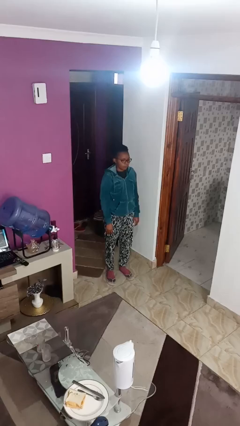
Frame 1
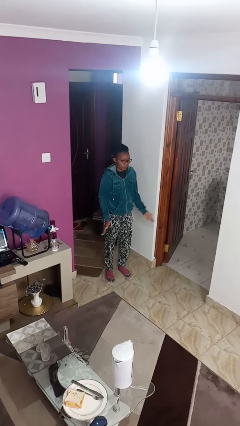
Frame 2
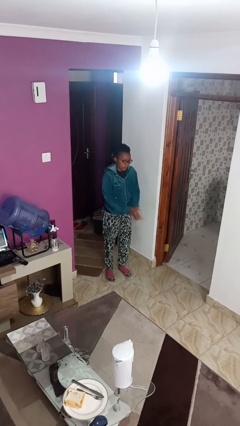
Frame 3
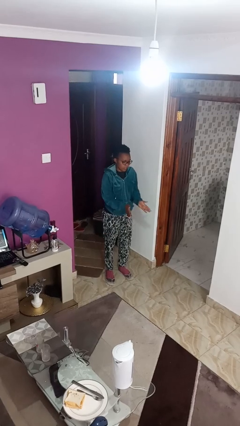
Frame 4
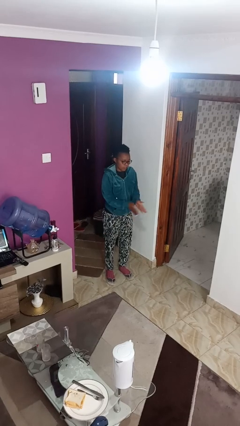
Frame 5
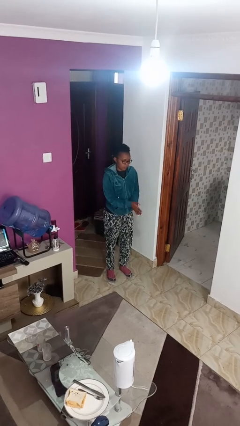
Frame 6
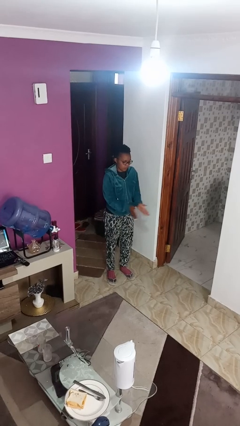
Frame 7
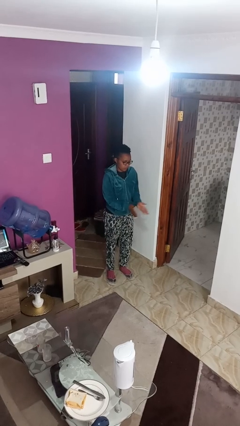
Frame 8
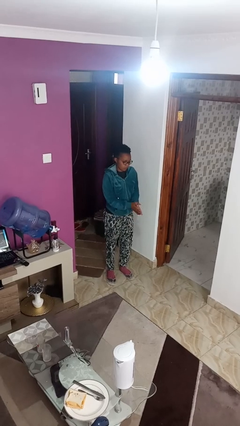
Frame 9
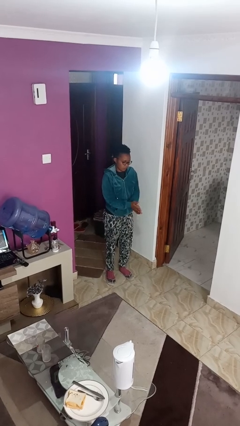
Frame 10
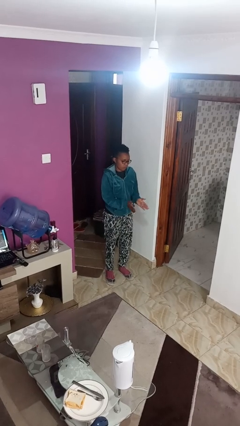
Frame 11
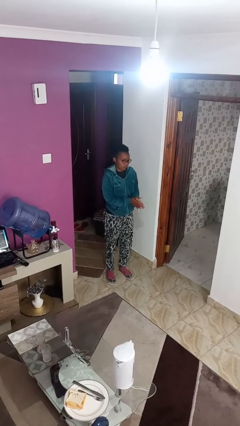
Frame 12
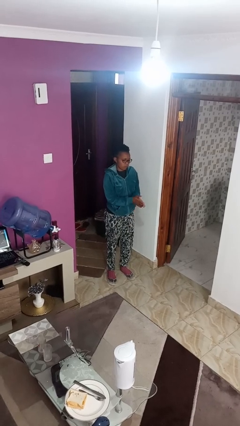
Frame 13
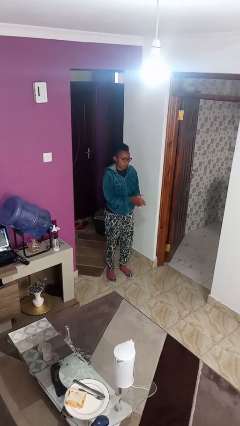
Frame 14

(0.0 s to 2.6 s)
person claps hands

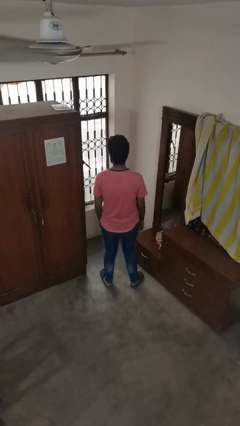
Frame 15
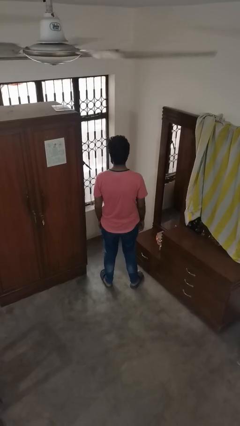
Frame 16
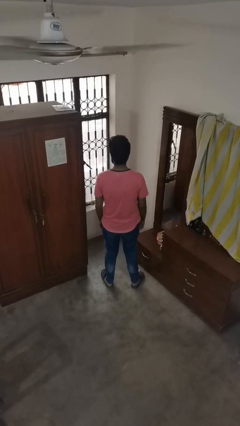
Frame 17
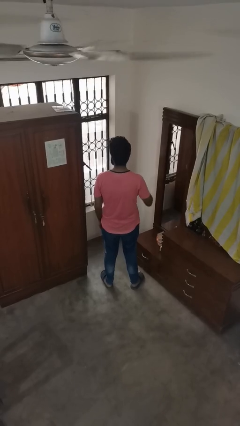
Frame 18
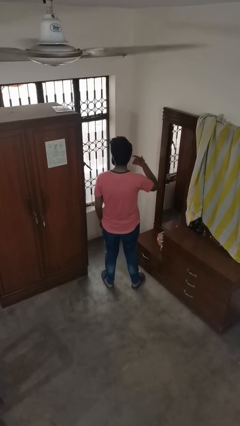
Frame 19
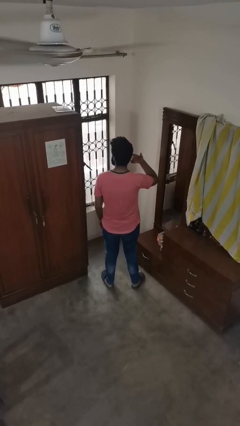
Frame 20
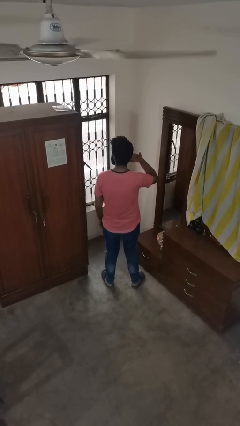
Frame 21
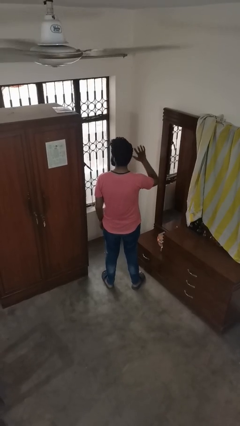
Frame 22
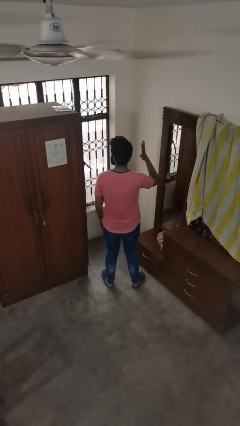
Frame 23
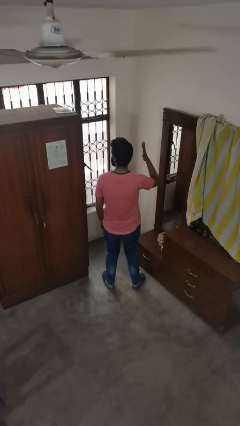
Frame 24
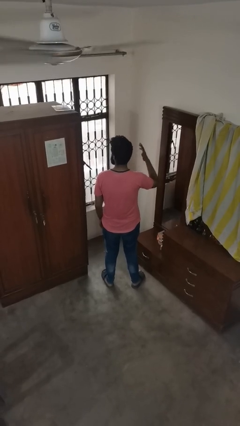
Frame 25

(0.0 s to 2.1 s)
person puts fingers in ear

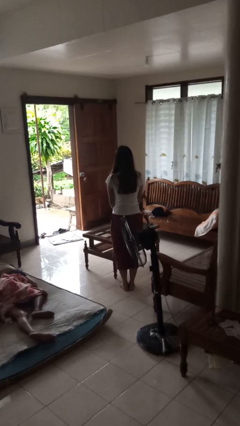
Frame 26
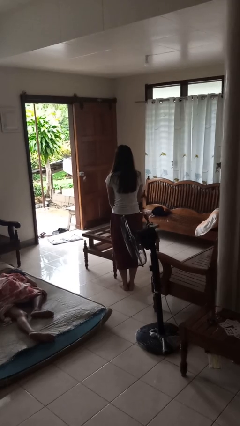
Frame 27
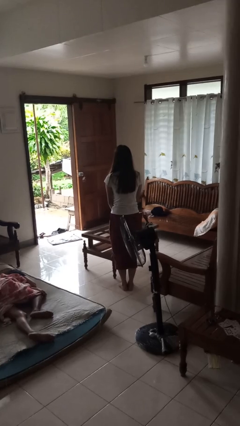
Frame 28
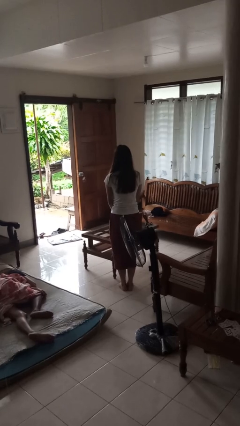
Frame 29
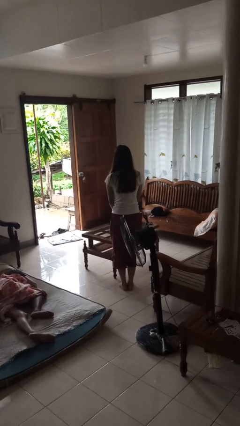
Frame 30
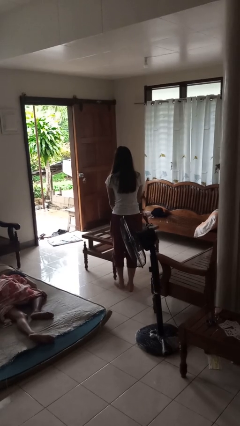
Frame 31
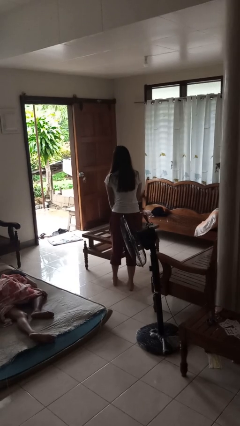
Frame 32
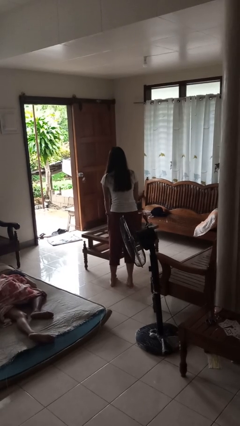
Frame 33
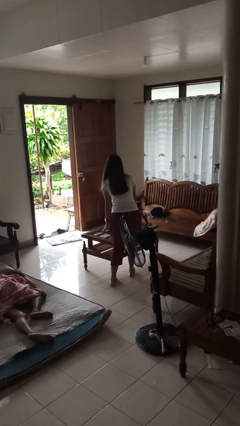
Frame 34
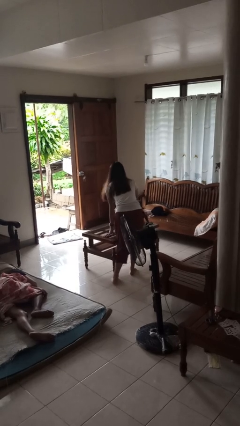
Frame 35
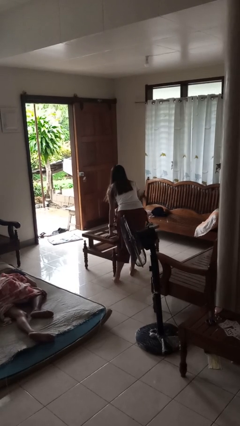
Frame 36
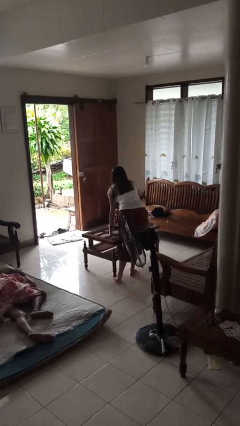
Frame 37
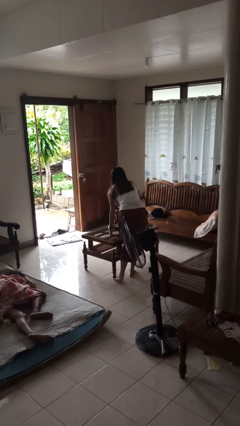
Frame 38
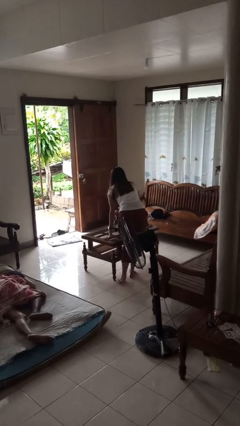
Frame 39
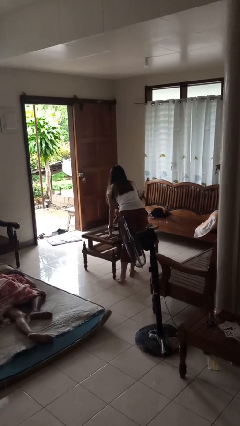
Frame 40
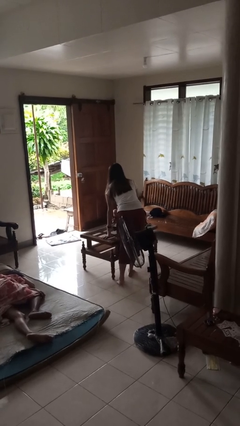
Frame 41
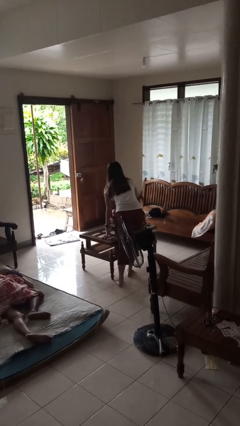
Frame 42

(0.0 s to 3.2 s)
person bumps into table

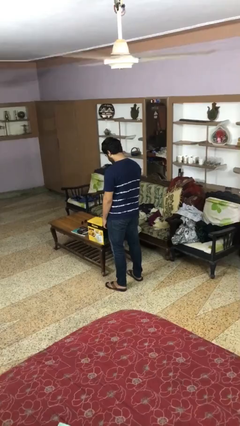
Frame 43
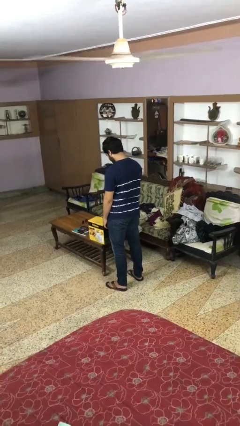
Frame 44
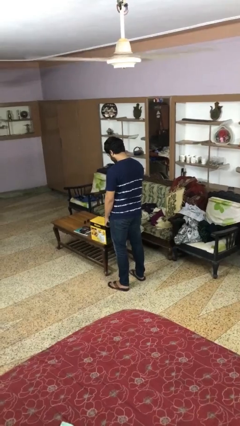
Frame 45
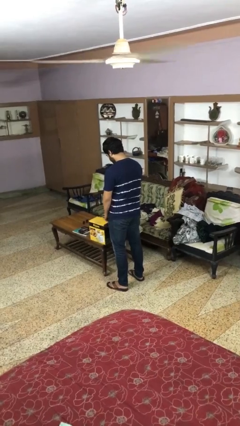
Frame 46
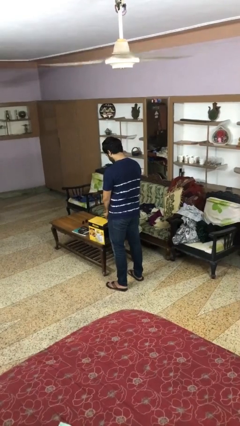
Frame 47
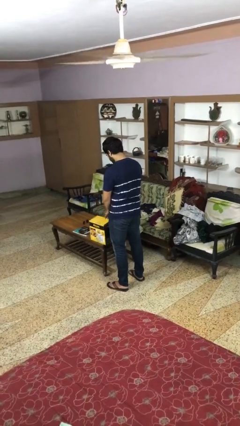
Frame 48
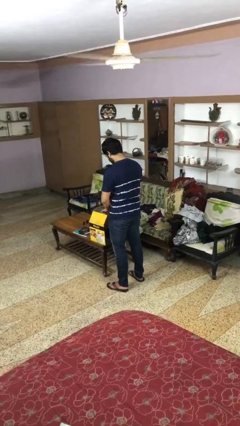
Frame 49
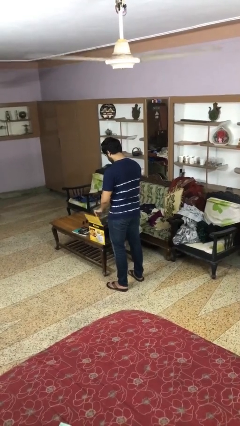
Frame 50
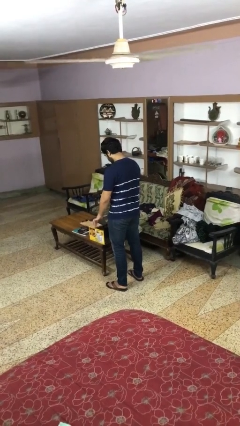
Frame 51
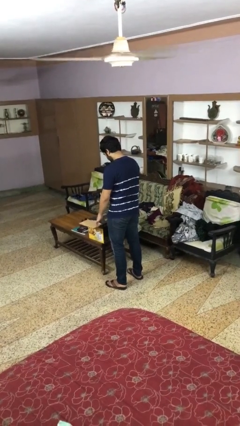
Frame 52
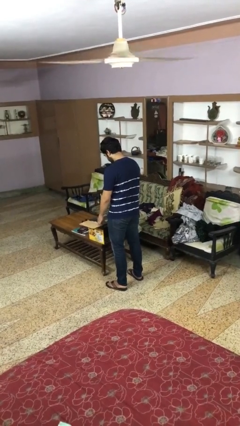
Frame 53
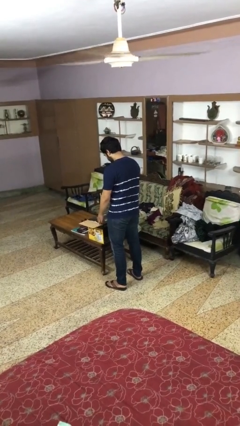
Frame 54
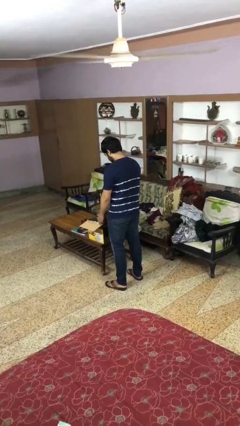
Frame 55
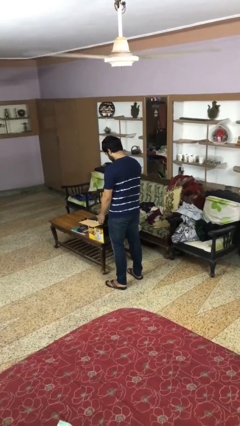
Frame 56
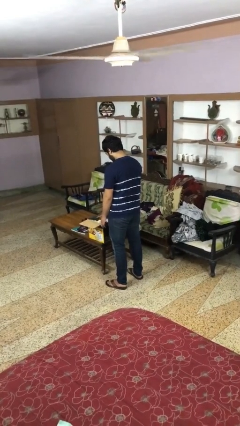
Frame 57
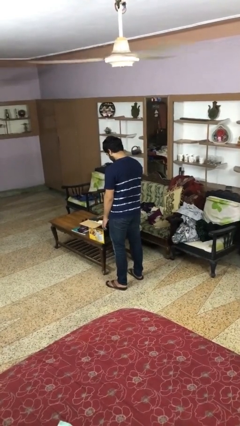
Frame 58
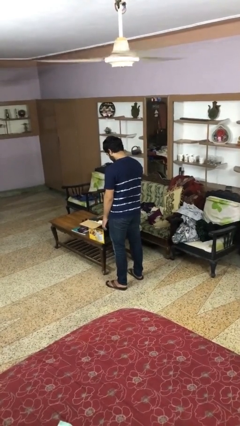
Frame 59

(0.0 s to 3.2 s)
person opens box

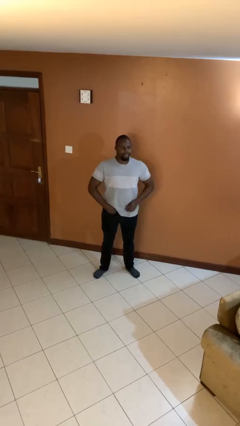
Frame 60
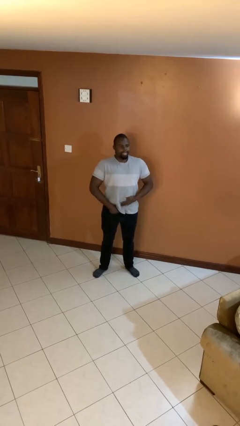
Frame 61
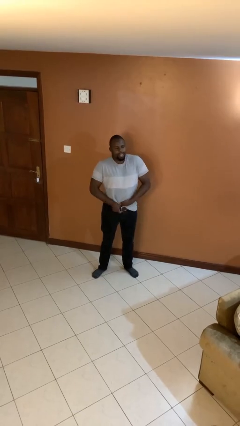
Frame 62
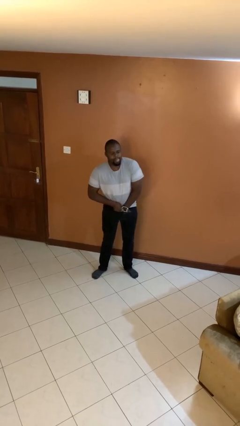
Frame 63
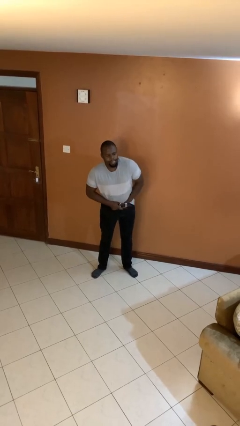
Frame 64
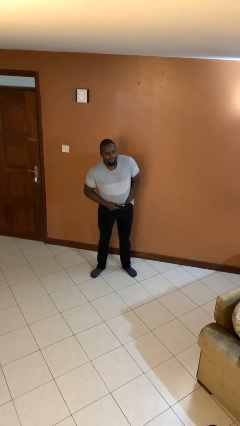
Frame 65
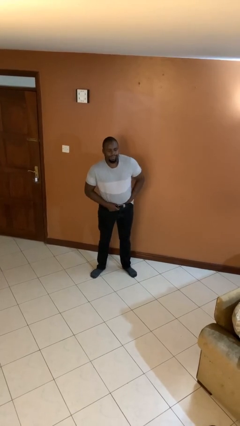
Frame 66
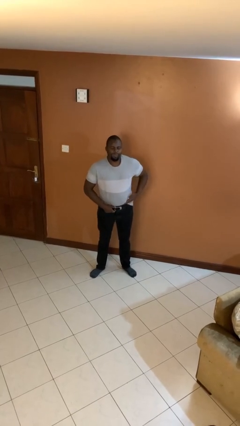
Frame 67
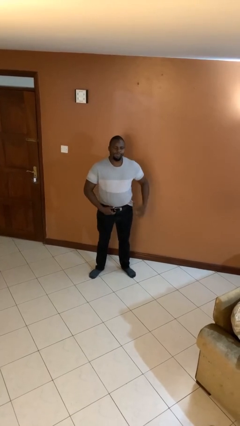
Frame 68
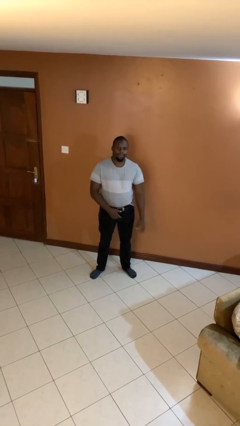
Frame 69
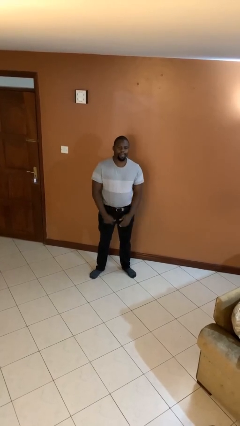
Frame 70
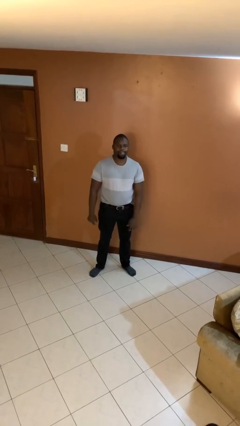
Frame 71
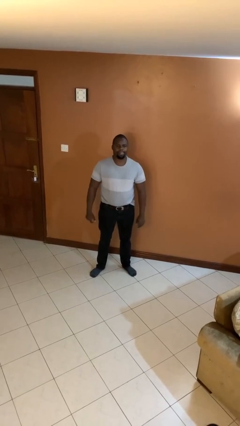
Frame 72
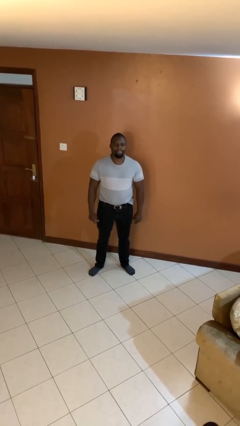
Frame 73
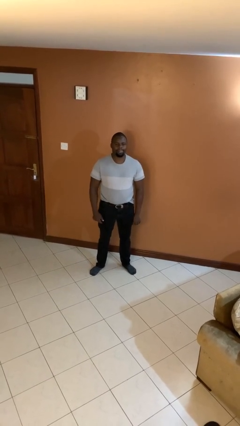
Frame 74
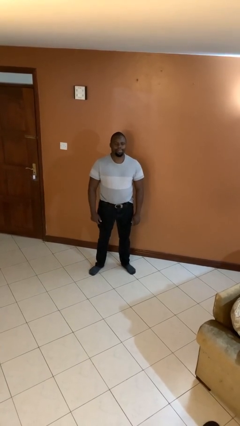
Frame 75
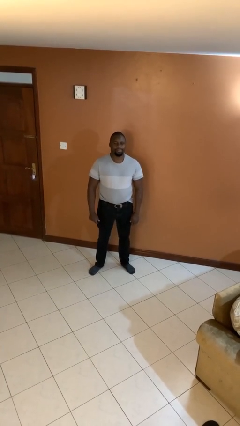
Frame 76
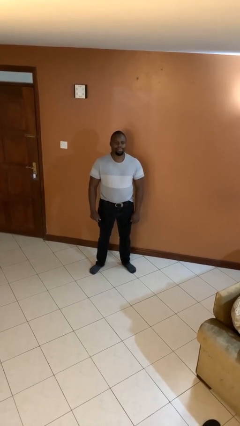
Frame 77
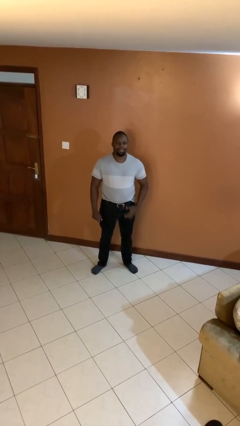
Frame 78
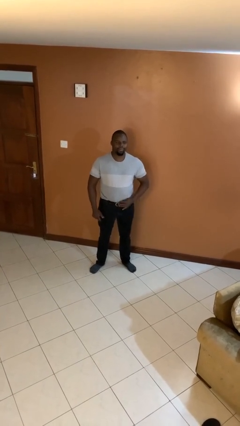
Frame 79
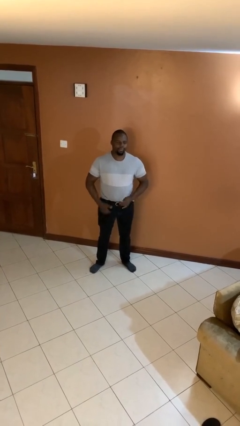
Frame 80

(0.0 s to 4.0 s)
person tucks in shirt

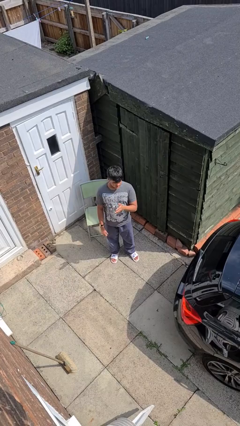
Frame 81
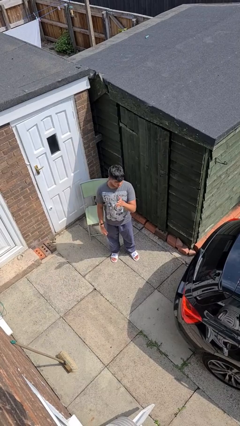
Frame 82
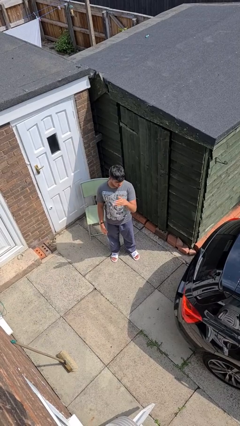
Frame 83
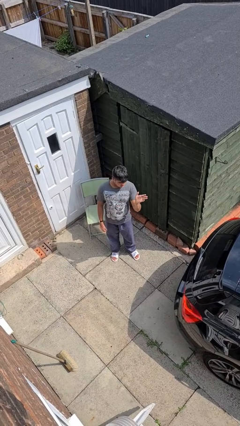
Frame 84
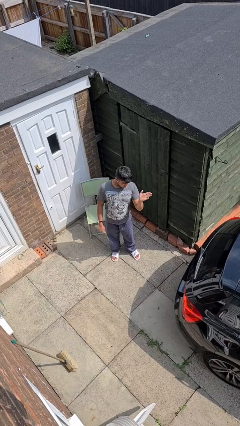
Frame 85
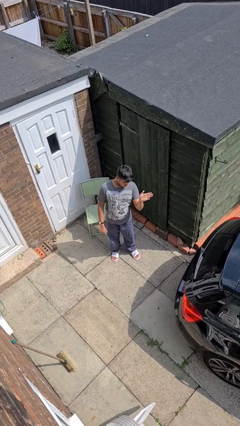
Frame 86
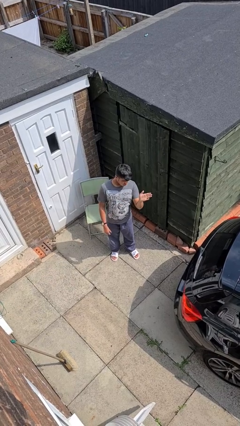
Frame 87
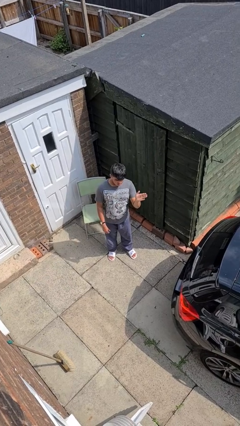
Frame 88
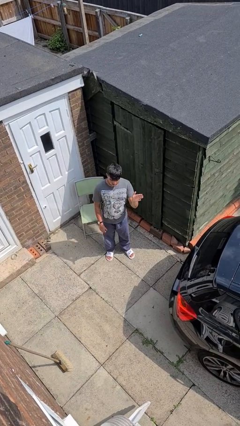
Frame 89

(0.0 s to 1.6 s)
person gestures swipe left

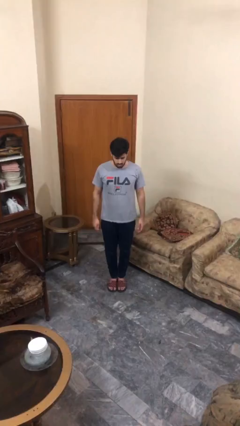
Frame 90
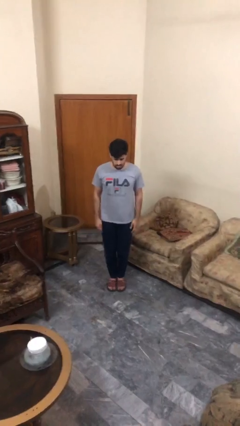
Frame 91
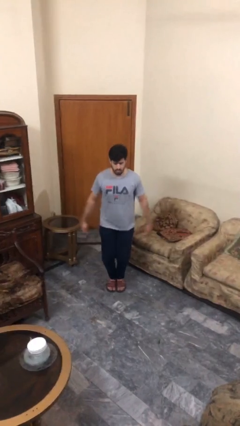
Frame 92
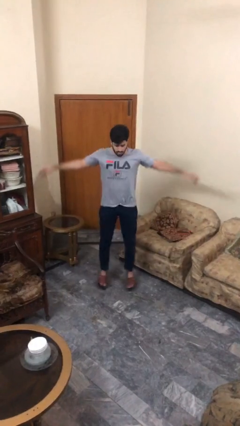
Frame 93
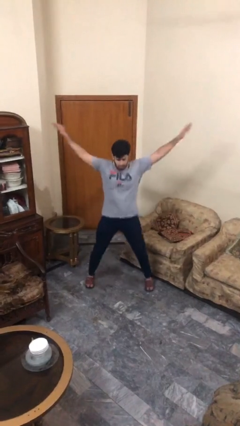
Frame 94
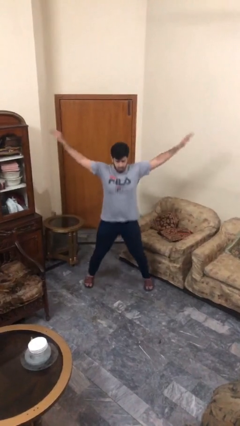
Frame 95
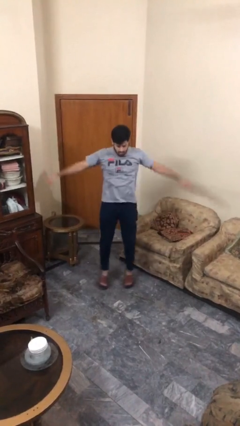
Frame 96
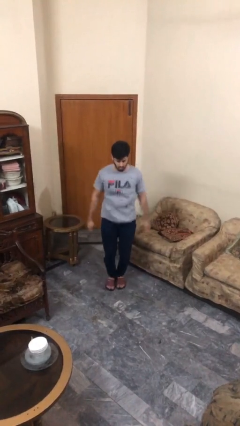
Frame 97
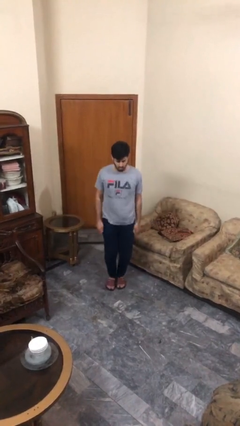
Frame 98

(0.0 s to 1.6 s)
person exercises with jumping jacks
